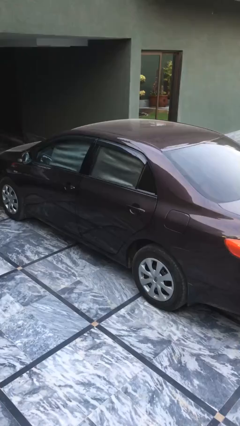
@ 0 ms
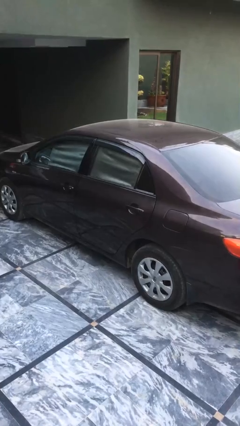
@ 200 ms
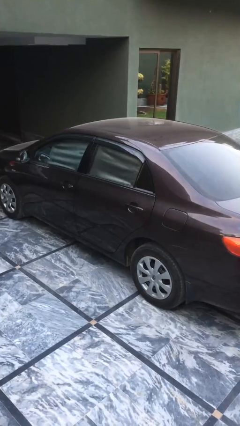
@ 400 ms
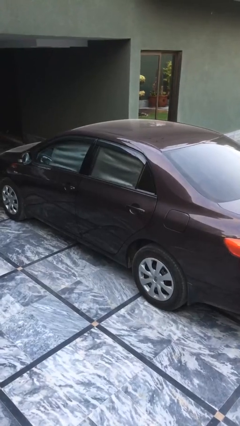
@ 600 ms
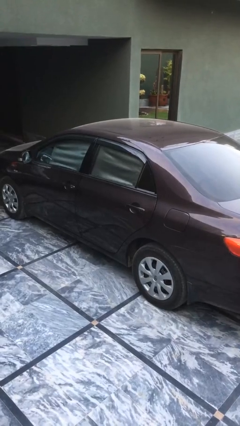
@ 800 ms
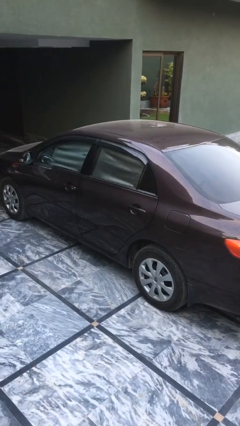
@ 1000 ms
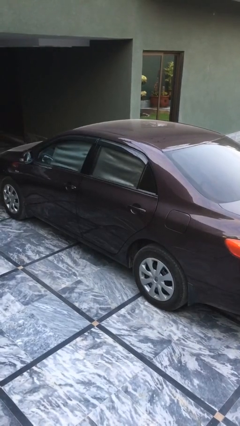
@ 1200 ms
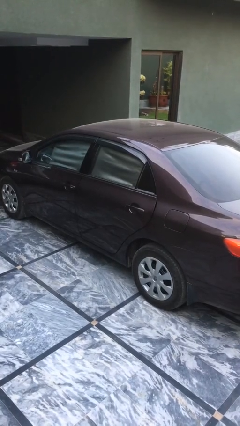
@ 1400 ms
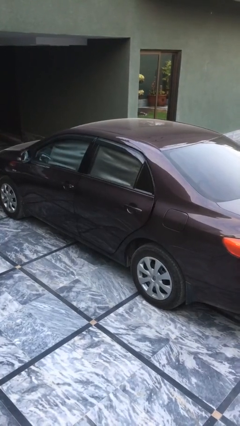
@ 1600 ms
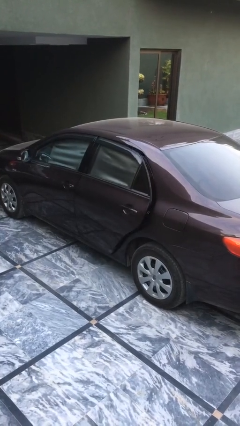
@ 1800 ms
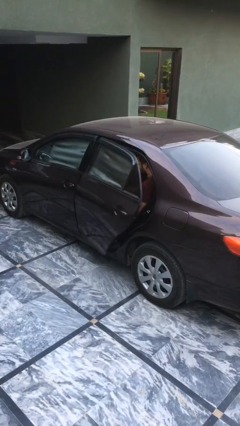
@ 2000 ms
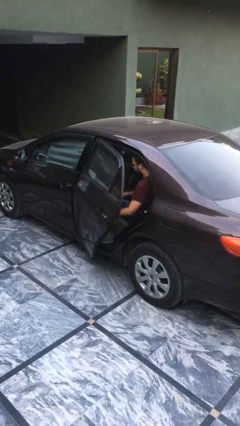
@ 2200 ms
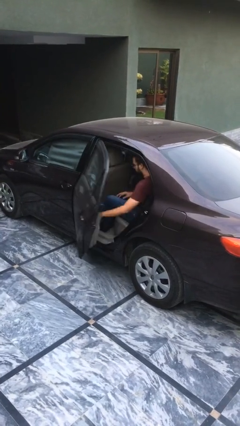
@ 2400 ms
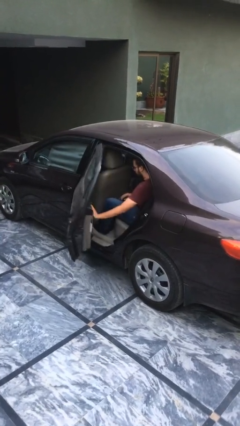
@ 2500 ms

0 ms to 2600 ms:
person opens car door

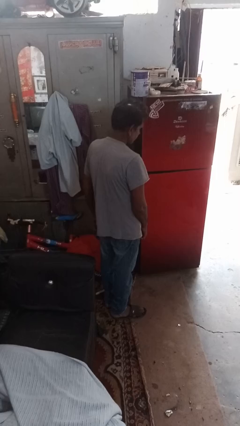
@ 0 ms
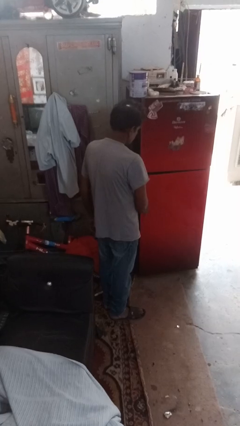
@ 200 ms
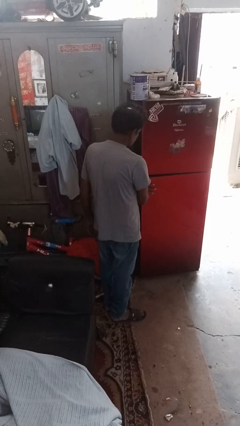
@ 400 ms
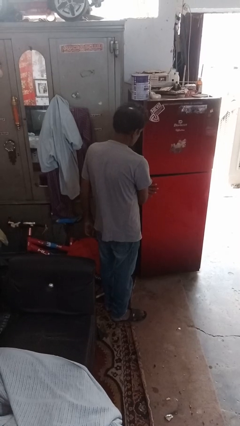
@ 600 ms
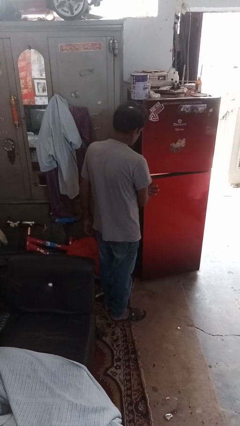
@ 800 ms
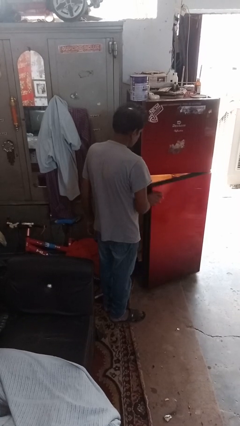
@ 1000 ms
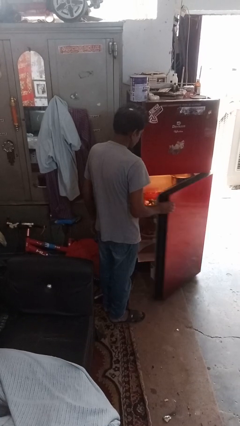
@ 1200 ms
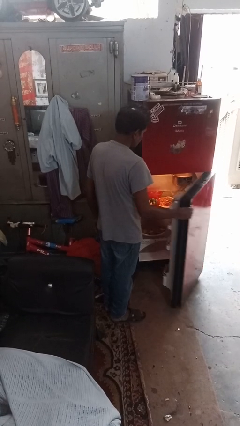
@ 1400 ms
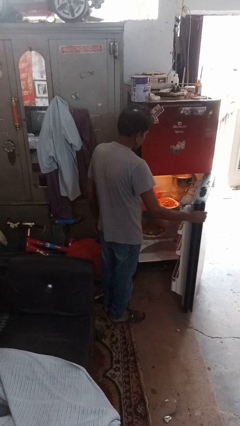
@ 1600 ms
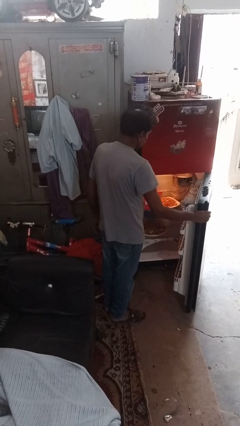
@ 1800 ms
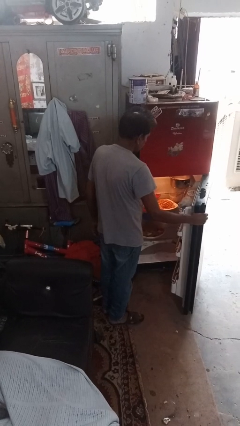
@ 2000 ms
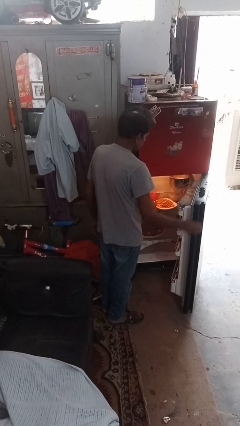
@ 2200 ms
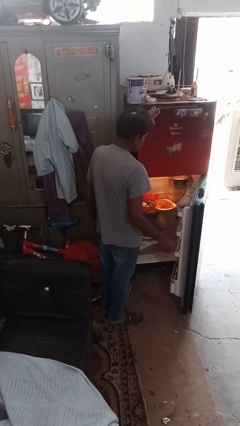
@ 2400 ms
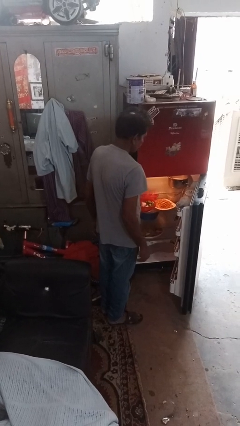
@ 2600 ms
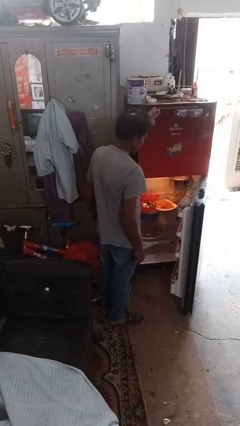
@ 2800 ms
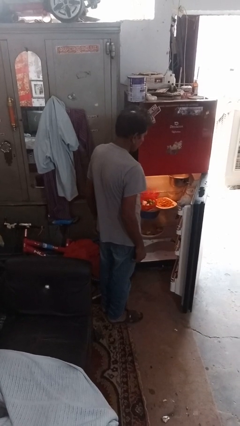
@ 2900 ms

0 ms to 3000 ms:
person opens refrigerator

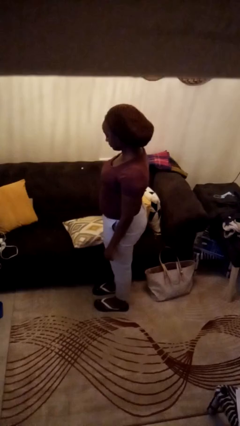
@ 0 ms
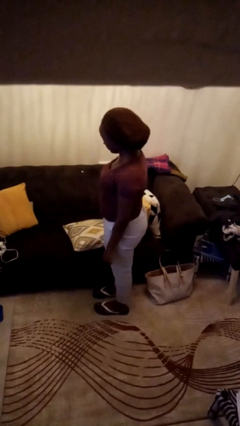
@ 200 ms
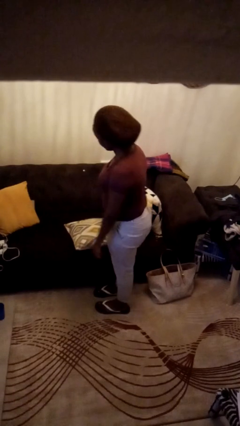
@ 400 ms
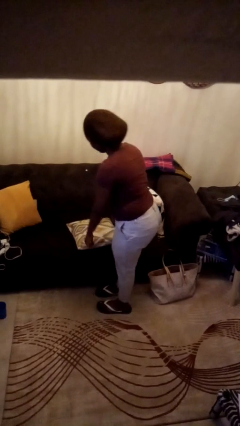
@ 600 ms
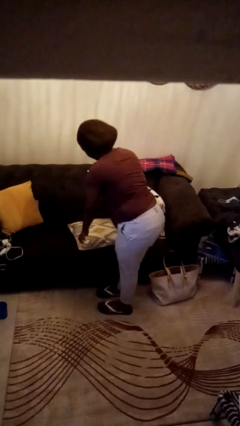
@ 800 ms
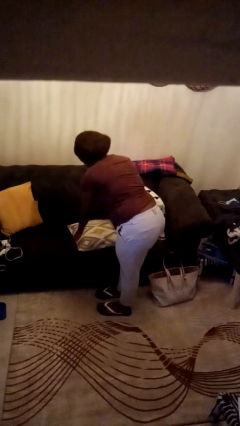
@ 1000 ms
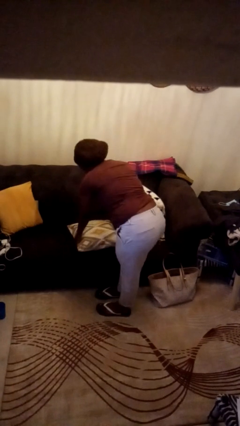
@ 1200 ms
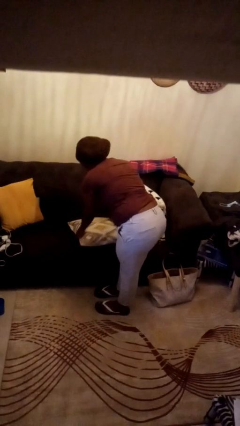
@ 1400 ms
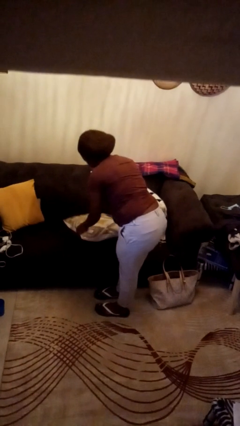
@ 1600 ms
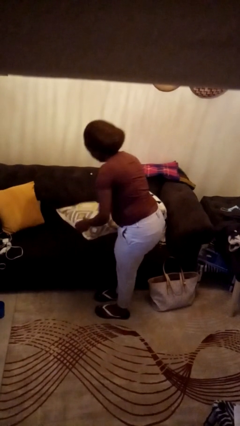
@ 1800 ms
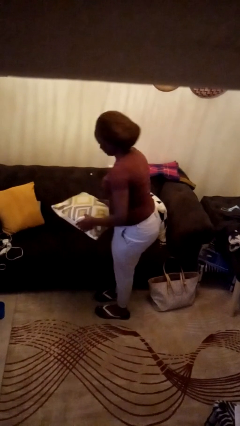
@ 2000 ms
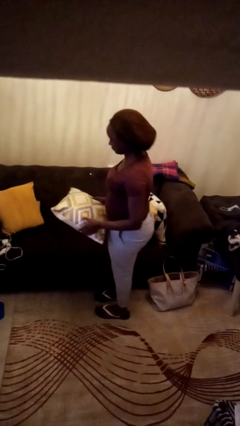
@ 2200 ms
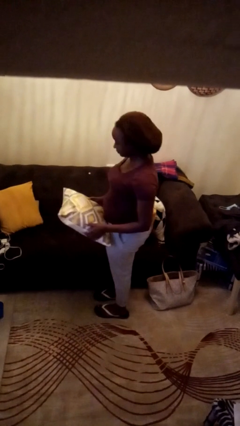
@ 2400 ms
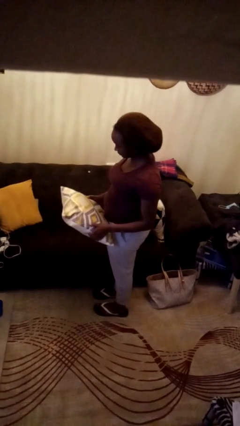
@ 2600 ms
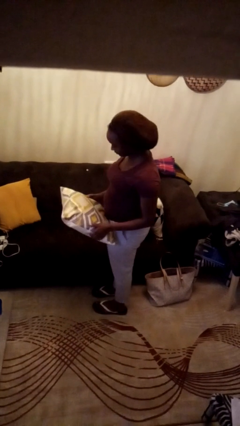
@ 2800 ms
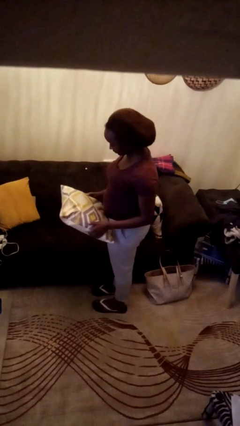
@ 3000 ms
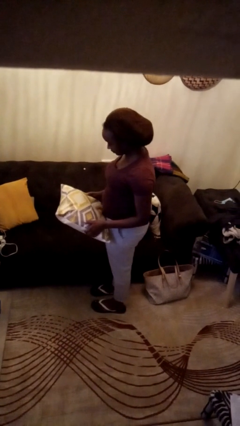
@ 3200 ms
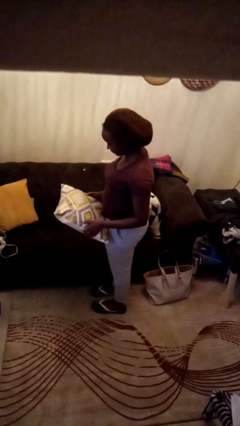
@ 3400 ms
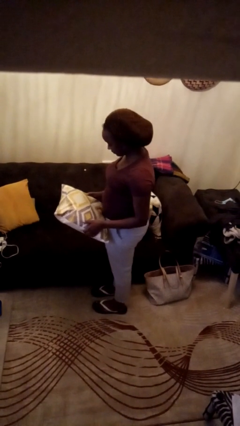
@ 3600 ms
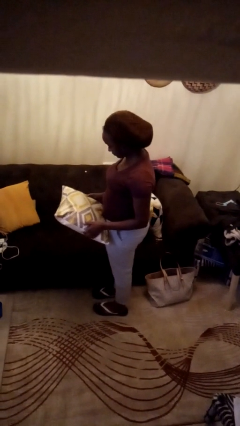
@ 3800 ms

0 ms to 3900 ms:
person picks up object from couch

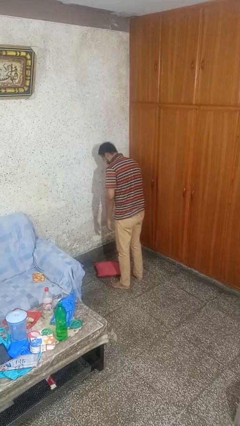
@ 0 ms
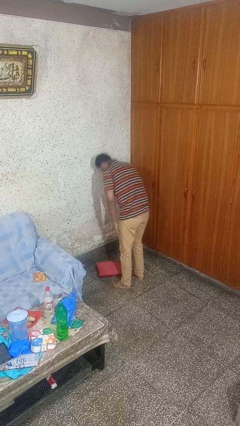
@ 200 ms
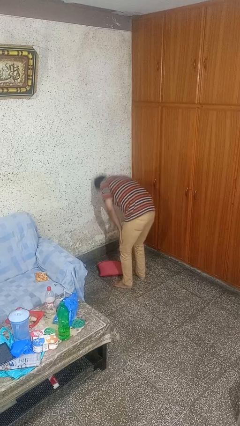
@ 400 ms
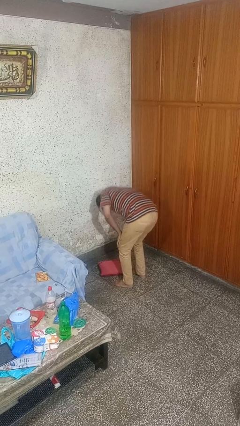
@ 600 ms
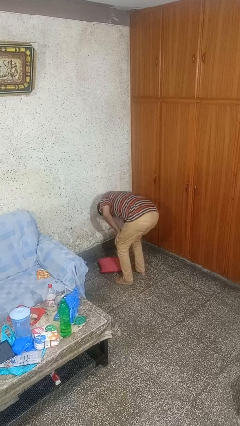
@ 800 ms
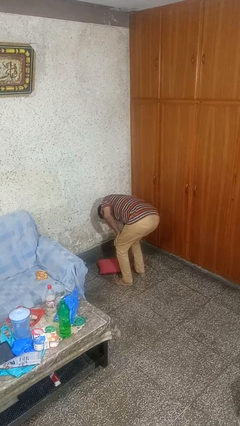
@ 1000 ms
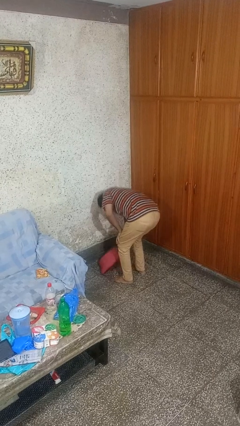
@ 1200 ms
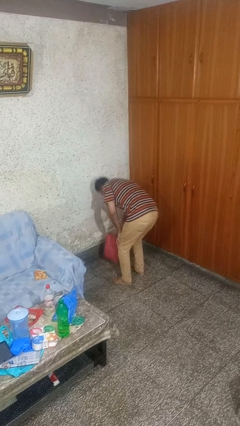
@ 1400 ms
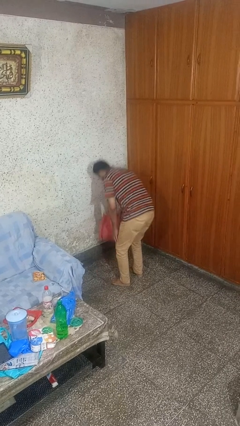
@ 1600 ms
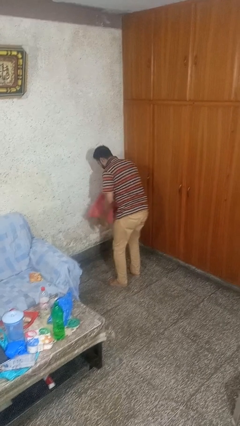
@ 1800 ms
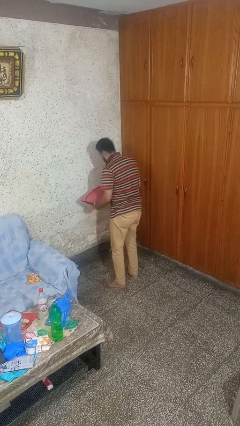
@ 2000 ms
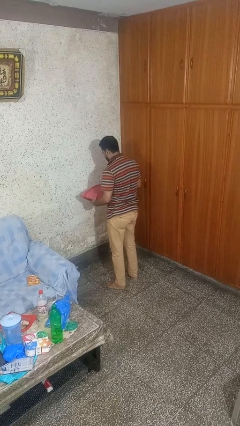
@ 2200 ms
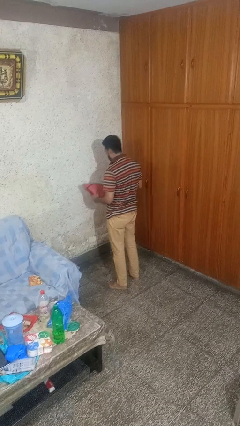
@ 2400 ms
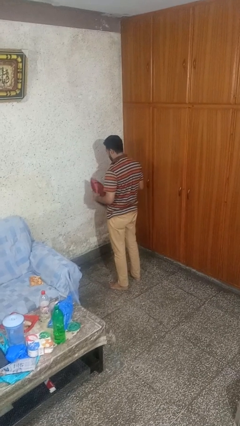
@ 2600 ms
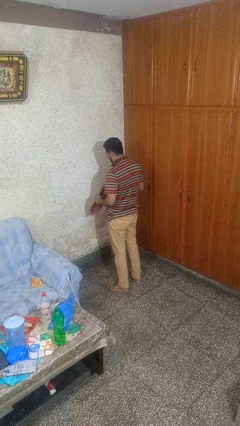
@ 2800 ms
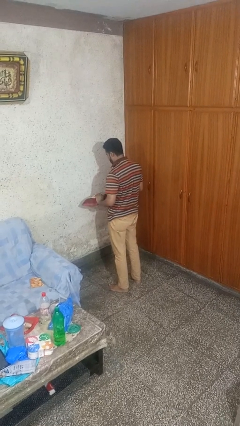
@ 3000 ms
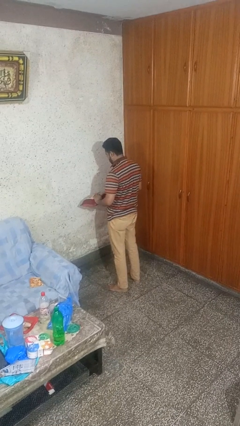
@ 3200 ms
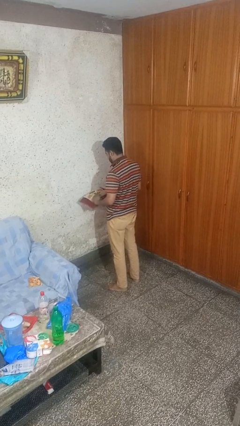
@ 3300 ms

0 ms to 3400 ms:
person picks up object from floor

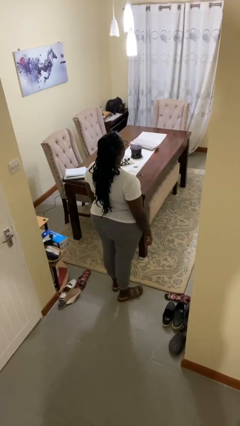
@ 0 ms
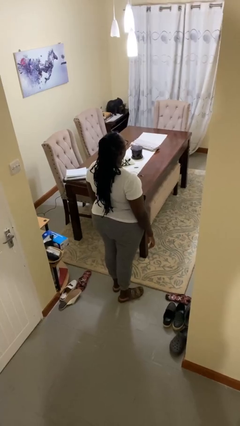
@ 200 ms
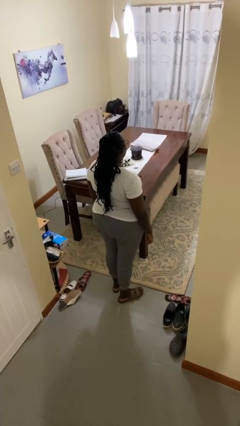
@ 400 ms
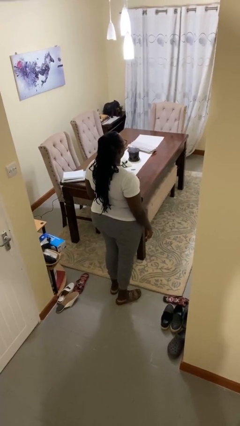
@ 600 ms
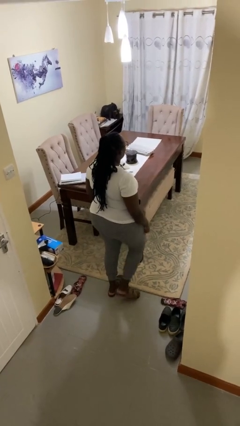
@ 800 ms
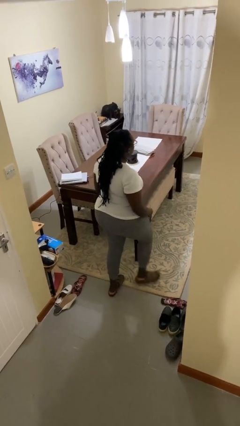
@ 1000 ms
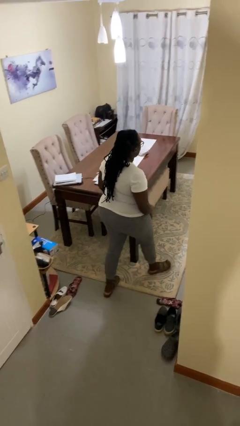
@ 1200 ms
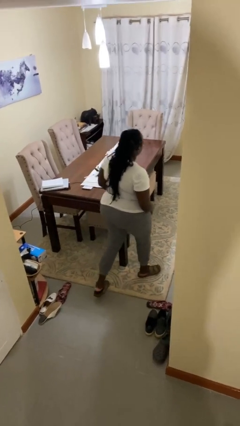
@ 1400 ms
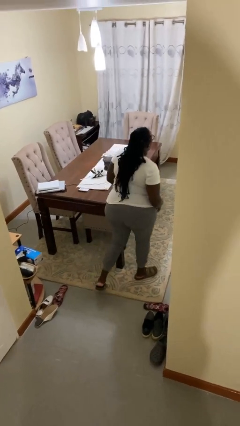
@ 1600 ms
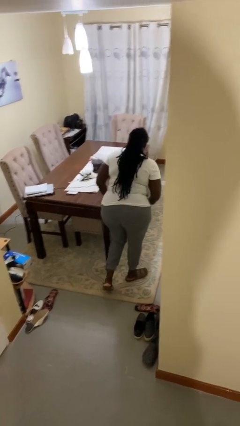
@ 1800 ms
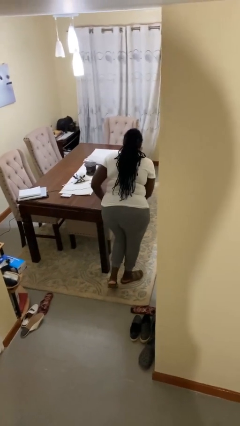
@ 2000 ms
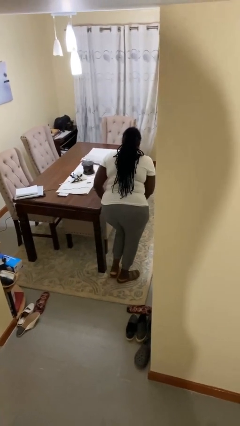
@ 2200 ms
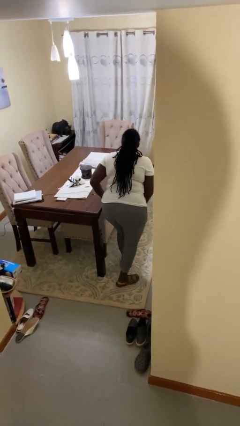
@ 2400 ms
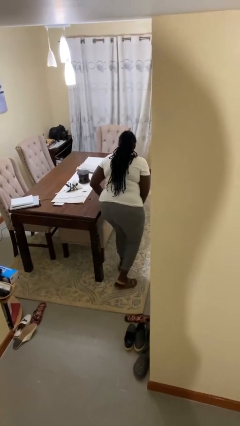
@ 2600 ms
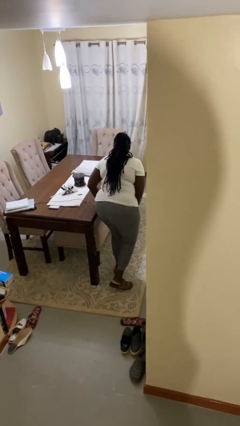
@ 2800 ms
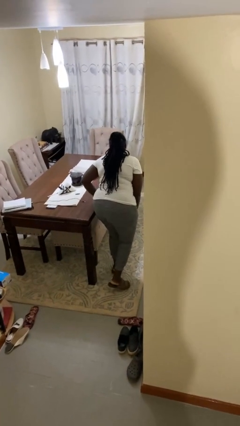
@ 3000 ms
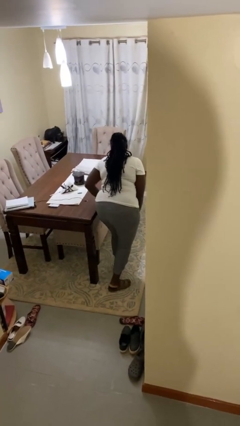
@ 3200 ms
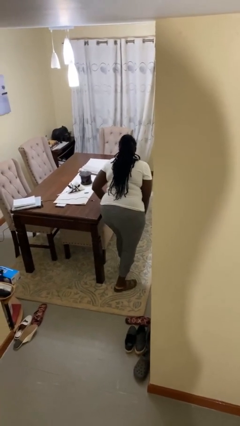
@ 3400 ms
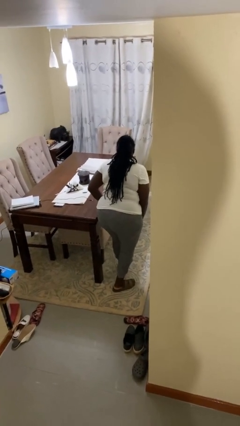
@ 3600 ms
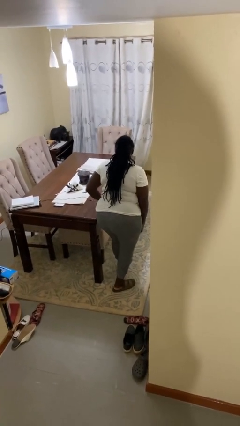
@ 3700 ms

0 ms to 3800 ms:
person bumps into table

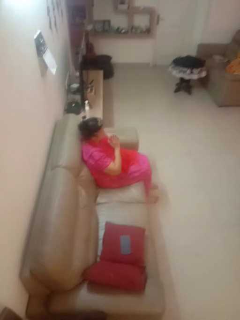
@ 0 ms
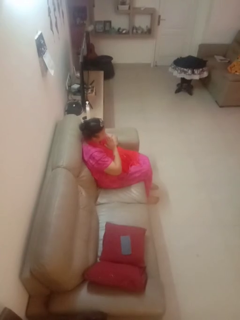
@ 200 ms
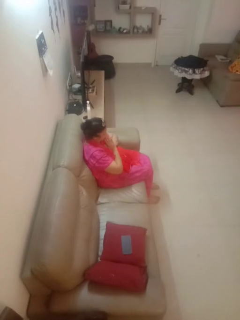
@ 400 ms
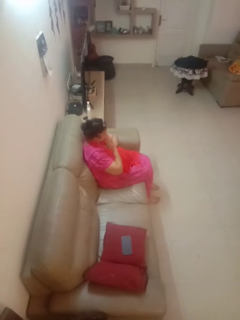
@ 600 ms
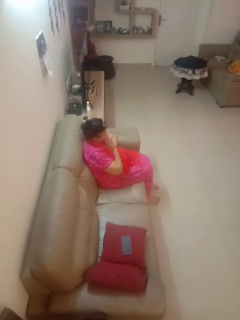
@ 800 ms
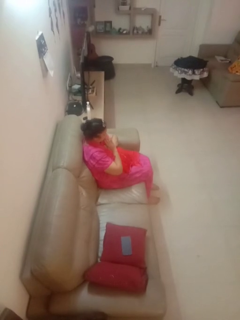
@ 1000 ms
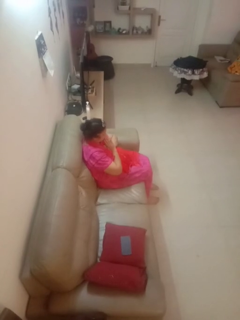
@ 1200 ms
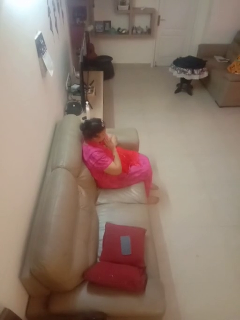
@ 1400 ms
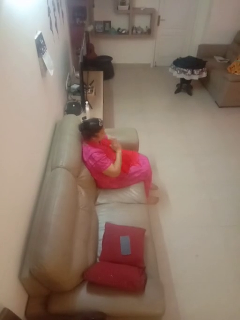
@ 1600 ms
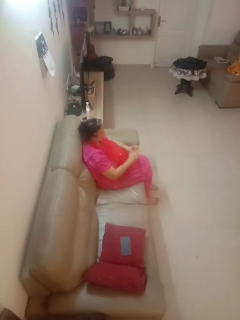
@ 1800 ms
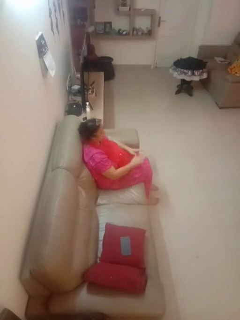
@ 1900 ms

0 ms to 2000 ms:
person prays
